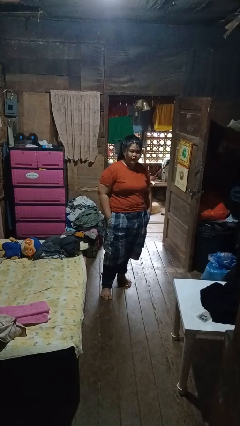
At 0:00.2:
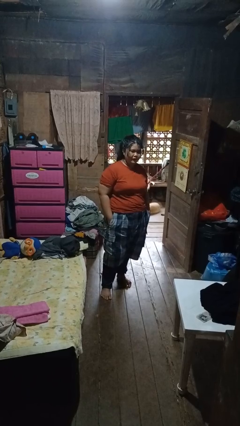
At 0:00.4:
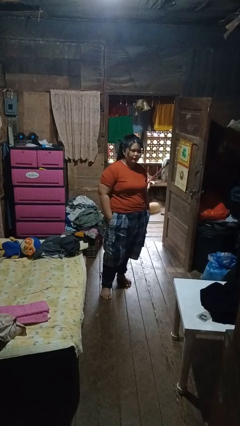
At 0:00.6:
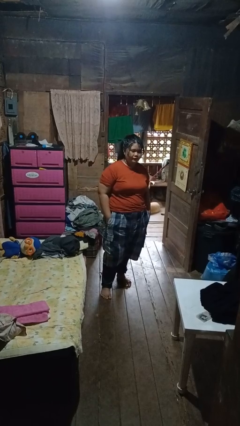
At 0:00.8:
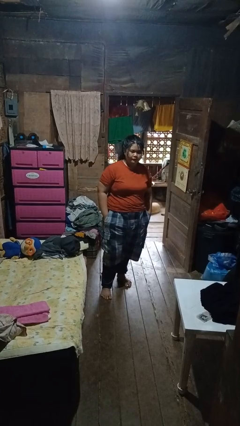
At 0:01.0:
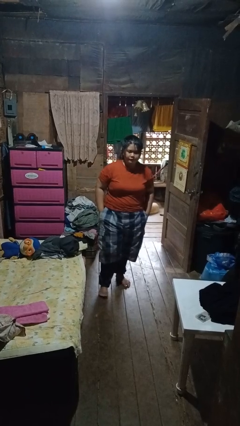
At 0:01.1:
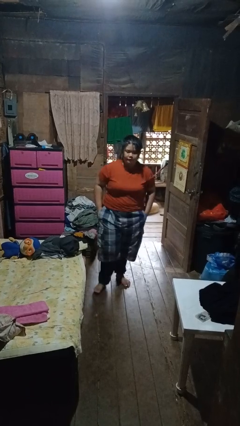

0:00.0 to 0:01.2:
person puts hands in back pockets

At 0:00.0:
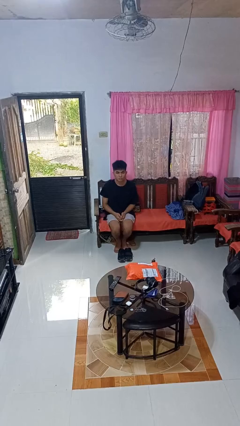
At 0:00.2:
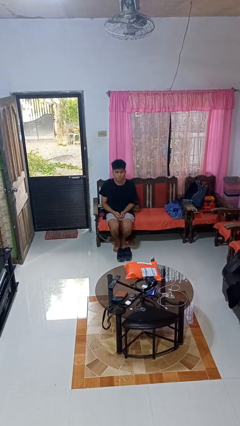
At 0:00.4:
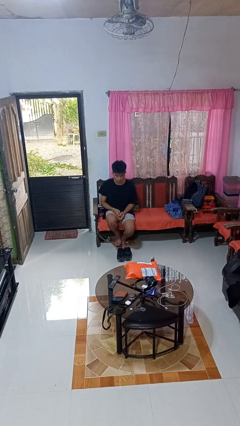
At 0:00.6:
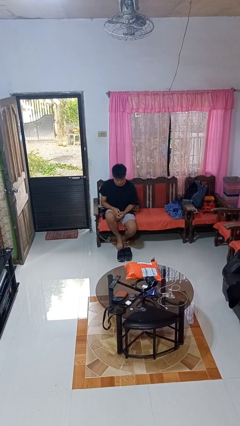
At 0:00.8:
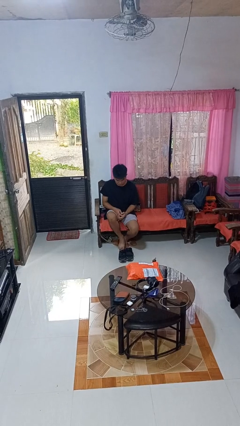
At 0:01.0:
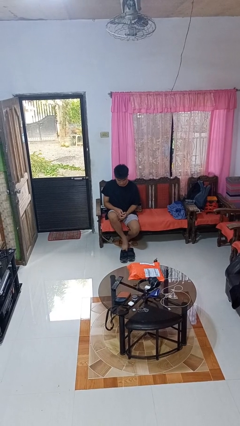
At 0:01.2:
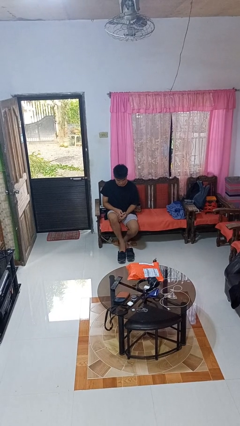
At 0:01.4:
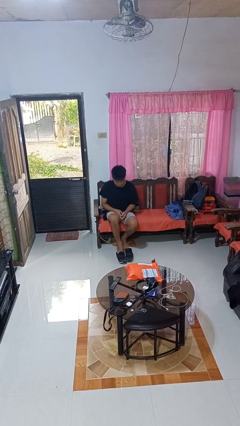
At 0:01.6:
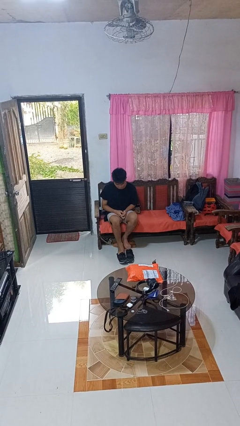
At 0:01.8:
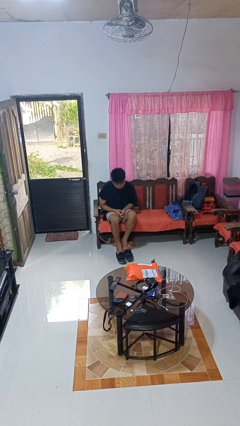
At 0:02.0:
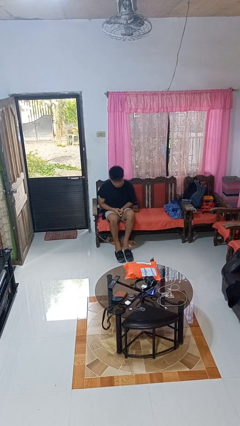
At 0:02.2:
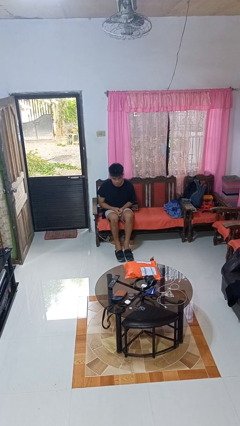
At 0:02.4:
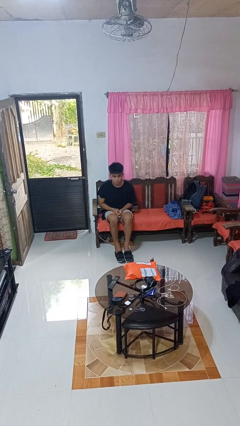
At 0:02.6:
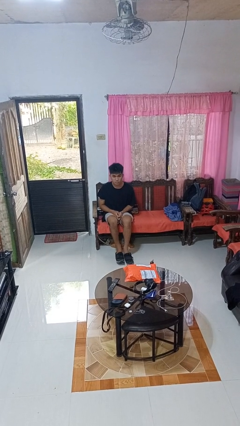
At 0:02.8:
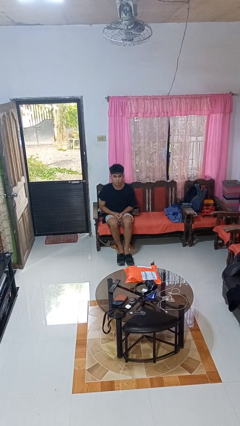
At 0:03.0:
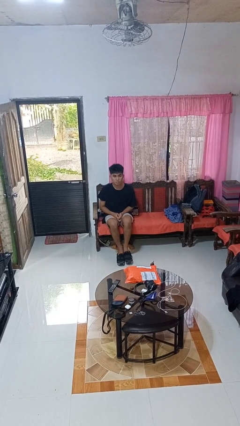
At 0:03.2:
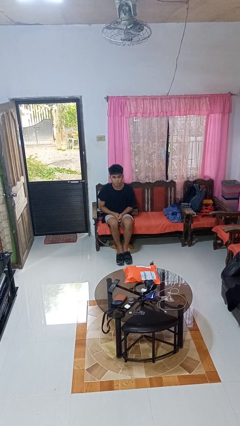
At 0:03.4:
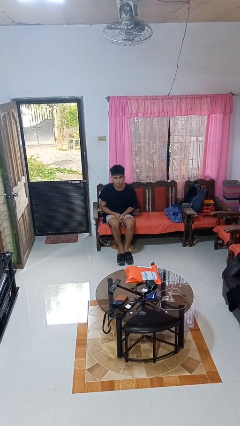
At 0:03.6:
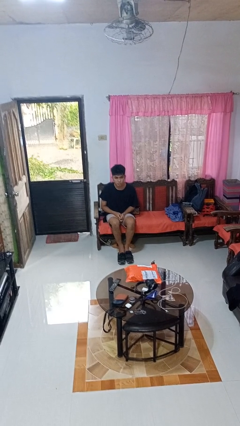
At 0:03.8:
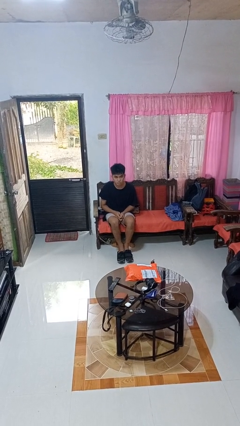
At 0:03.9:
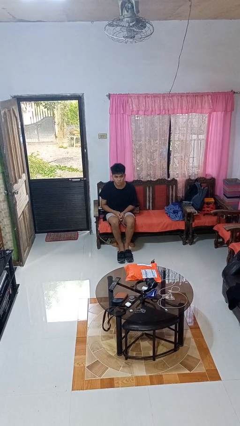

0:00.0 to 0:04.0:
person puts on shoes

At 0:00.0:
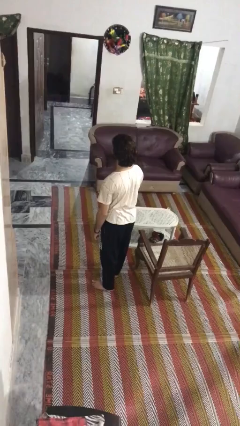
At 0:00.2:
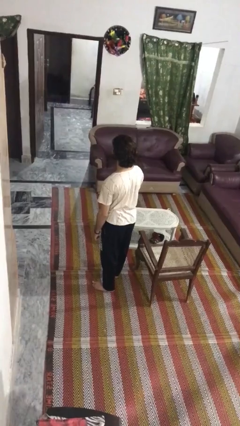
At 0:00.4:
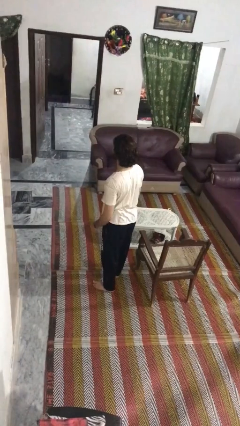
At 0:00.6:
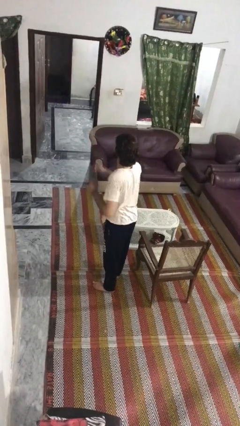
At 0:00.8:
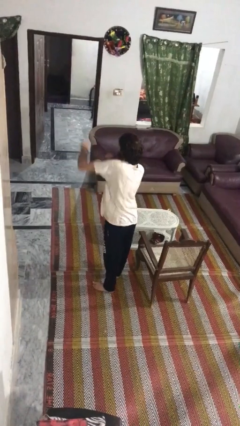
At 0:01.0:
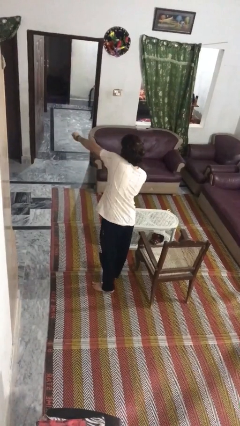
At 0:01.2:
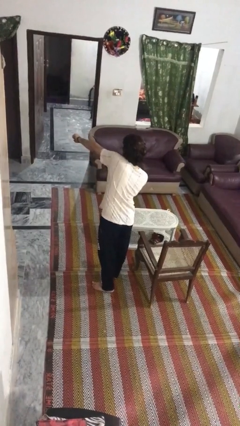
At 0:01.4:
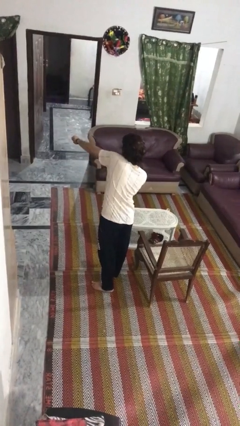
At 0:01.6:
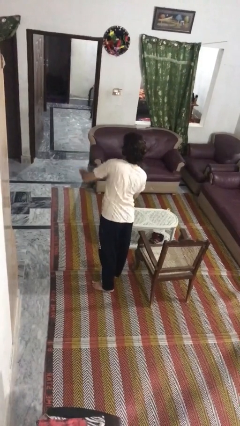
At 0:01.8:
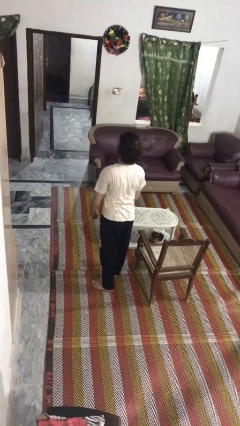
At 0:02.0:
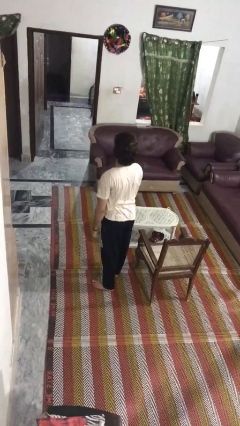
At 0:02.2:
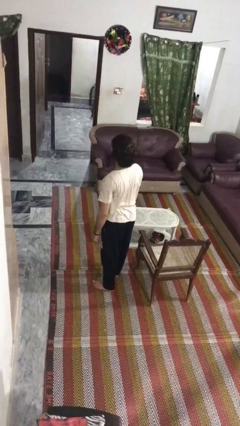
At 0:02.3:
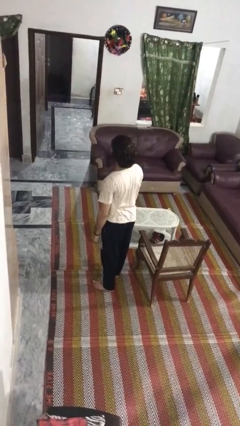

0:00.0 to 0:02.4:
person punches

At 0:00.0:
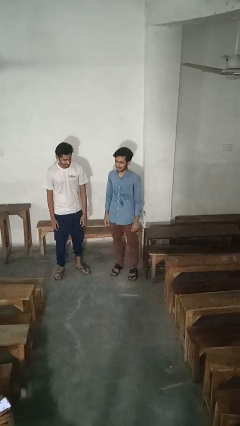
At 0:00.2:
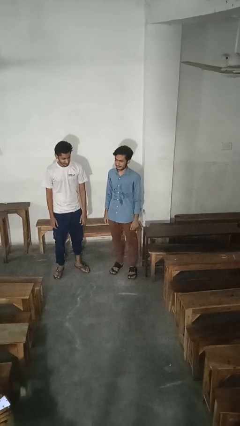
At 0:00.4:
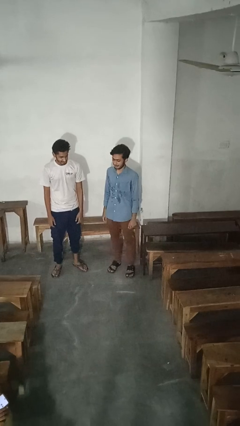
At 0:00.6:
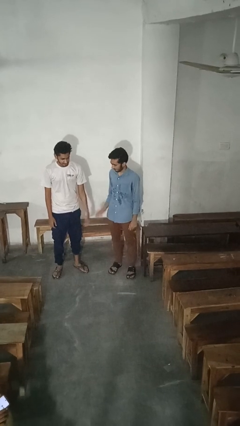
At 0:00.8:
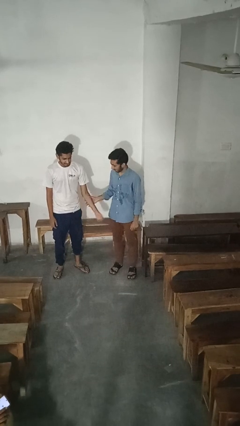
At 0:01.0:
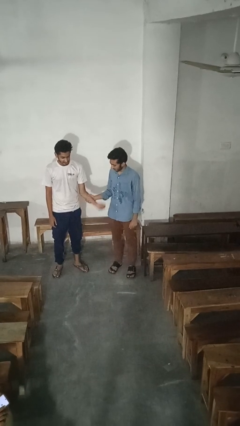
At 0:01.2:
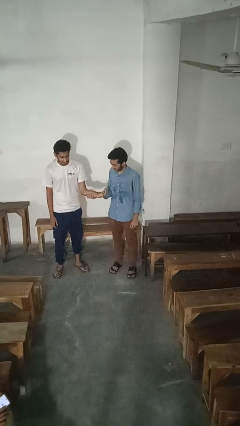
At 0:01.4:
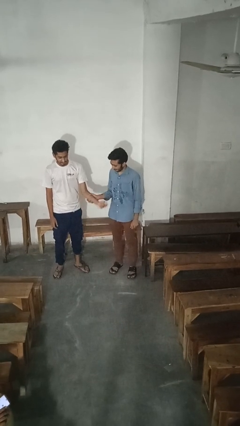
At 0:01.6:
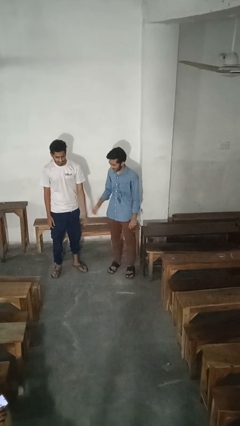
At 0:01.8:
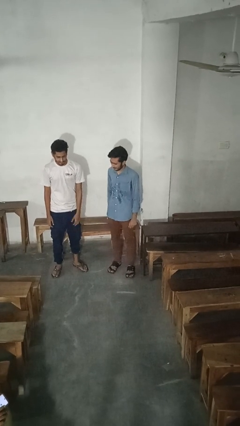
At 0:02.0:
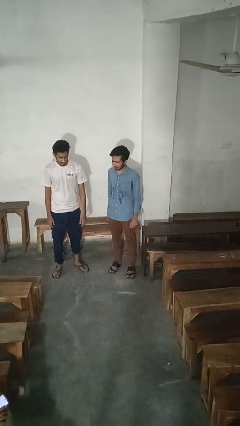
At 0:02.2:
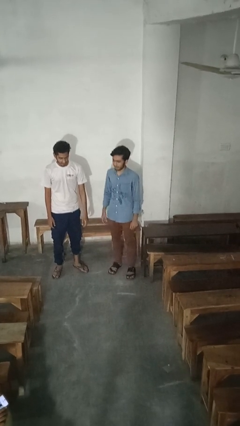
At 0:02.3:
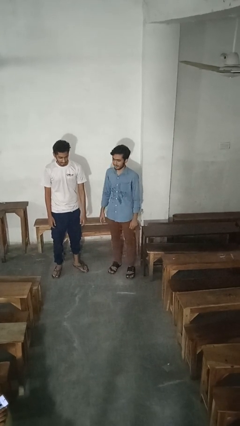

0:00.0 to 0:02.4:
person grabs person by forearm

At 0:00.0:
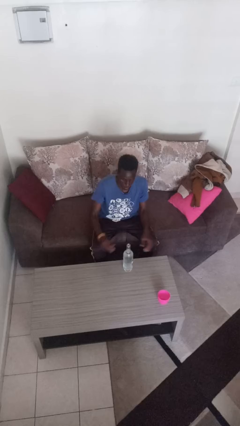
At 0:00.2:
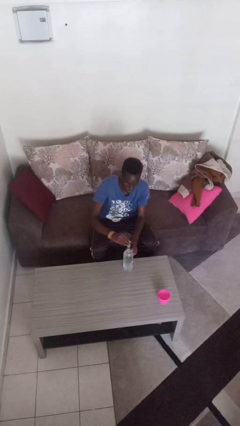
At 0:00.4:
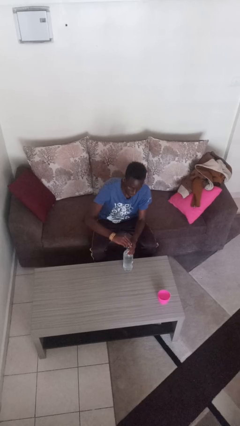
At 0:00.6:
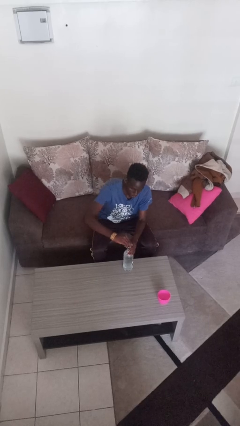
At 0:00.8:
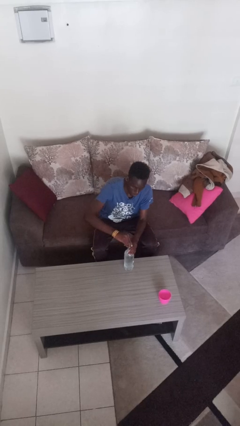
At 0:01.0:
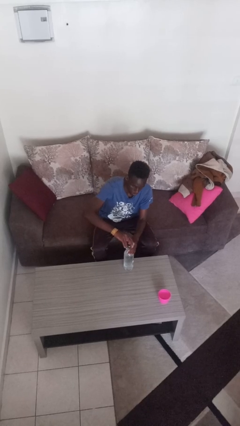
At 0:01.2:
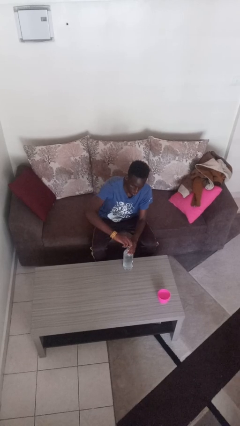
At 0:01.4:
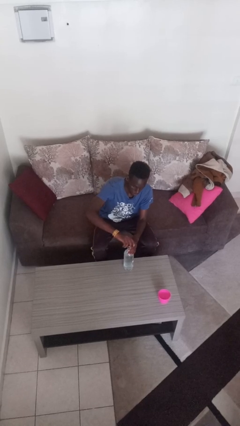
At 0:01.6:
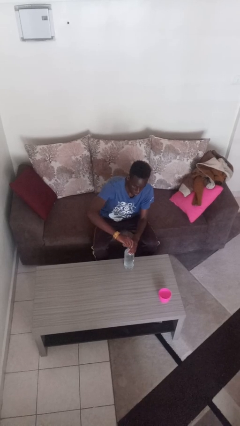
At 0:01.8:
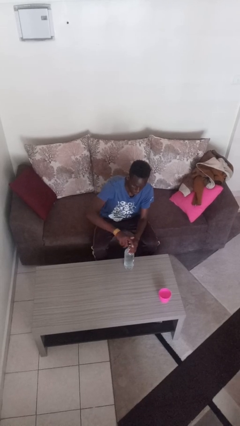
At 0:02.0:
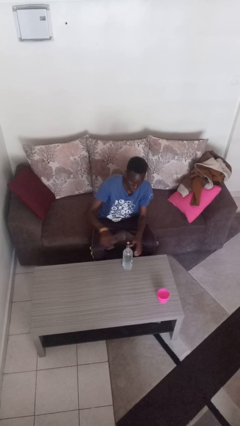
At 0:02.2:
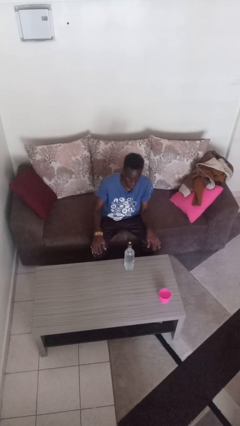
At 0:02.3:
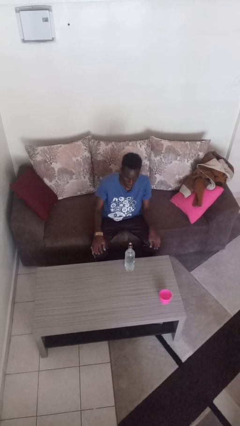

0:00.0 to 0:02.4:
person screws lid to bottle

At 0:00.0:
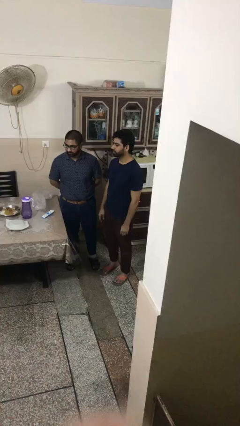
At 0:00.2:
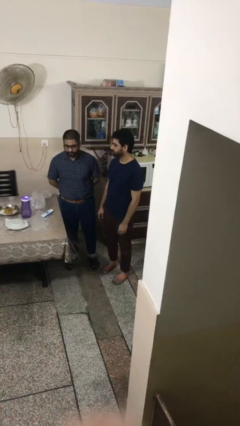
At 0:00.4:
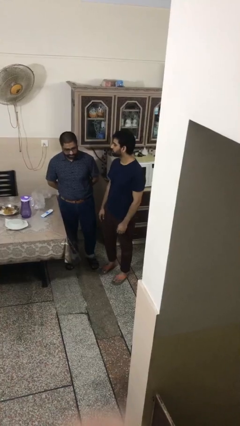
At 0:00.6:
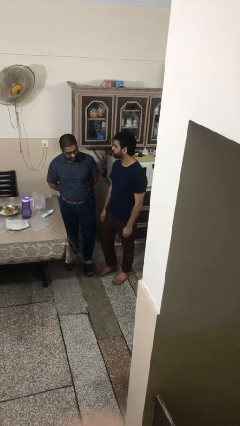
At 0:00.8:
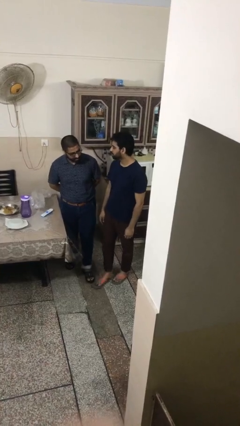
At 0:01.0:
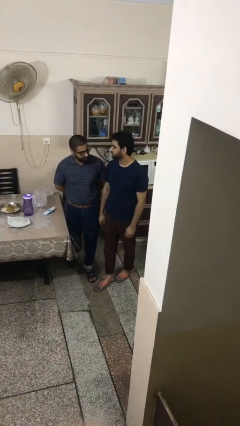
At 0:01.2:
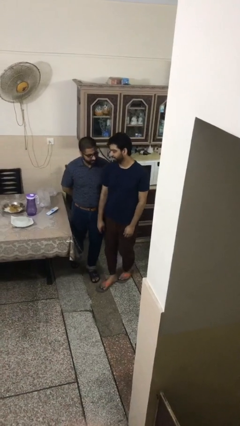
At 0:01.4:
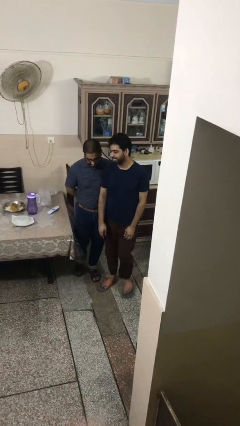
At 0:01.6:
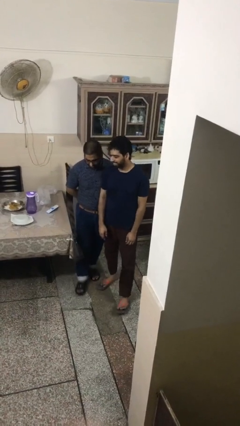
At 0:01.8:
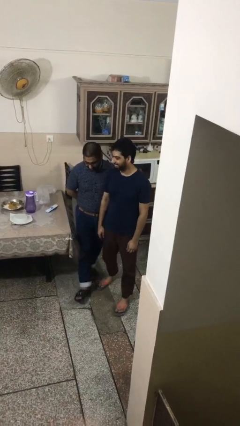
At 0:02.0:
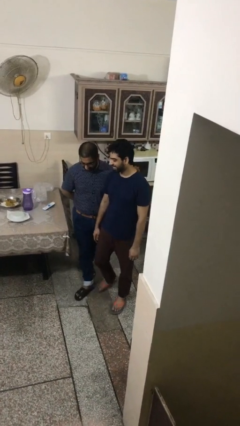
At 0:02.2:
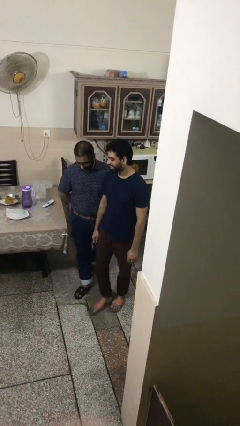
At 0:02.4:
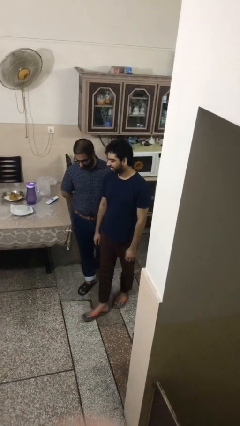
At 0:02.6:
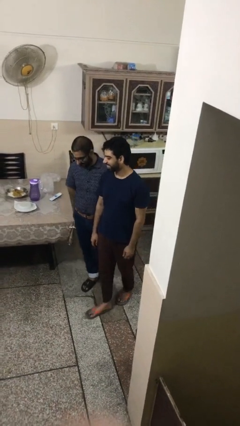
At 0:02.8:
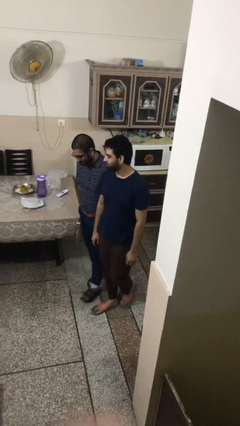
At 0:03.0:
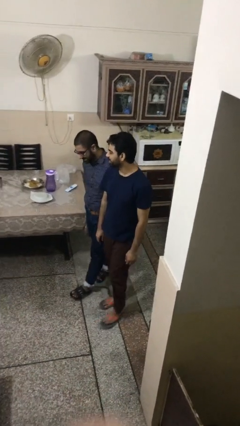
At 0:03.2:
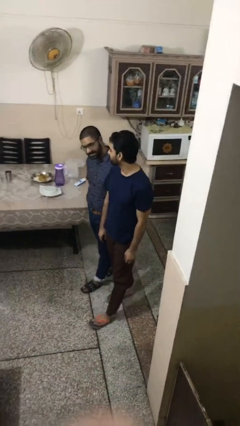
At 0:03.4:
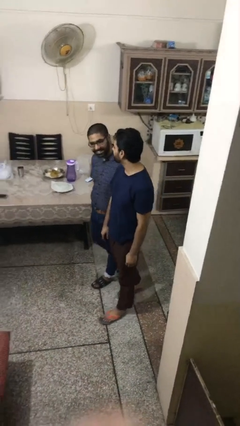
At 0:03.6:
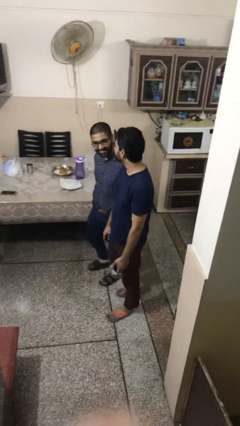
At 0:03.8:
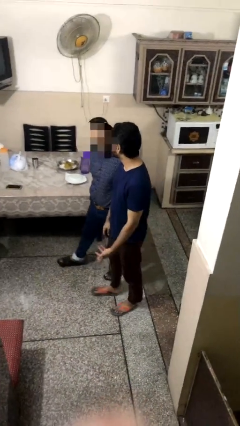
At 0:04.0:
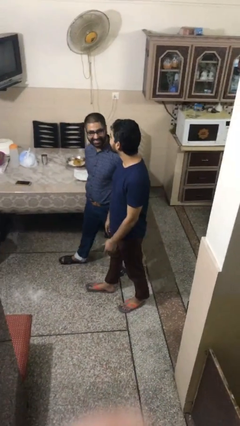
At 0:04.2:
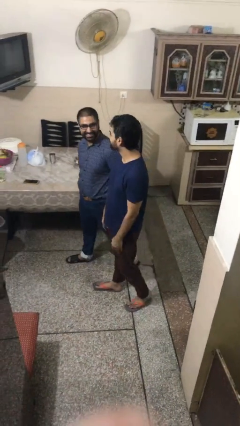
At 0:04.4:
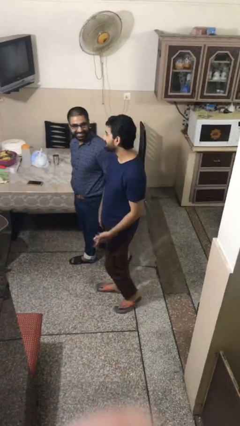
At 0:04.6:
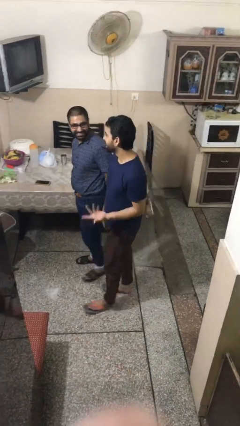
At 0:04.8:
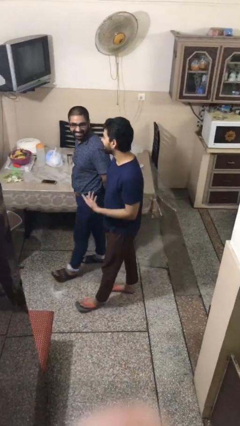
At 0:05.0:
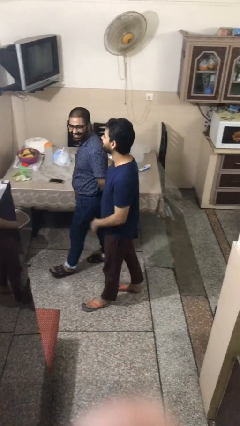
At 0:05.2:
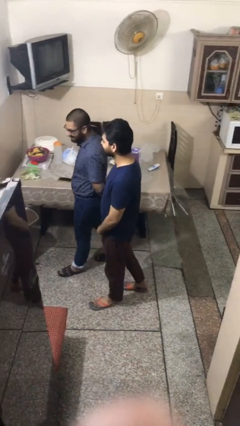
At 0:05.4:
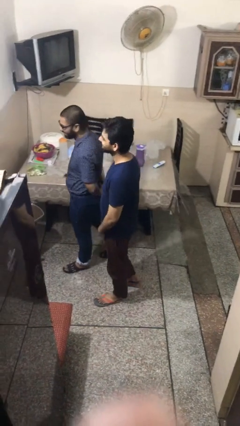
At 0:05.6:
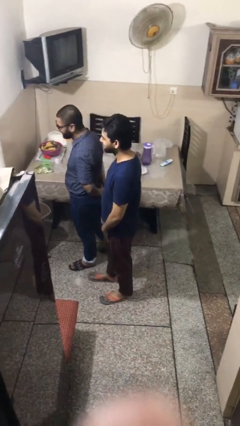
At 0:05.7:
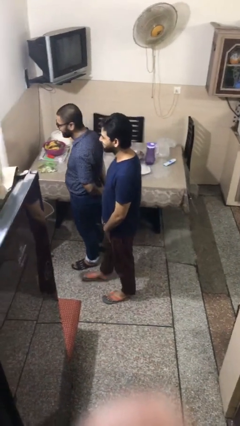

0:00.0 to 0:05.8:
person talks to person
